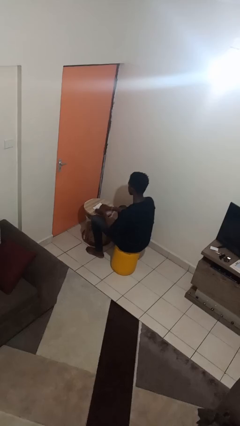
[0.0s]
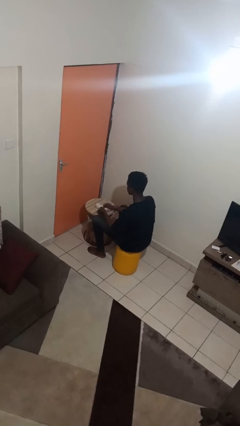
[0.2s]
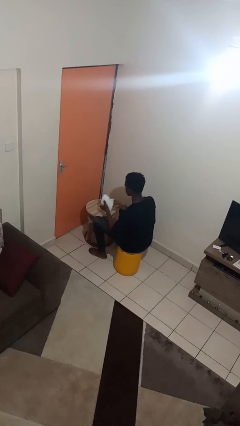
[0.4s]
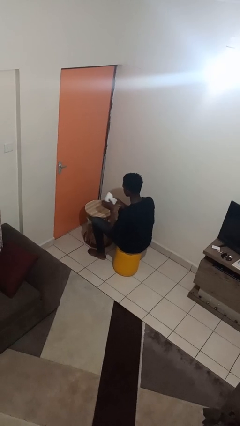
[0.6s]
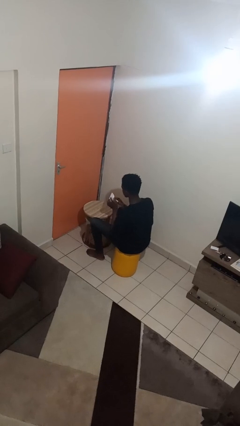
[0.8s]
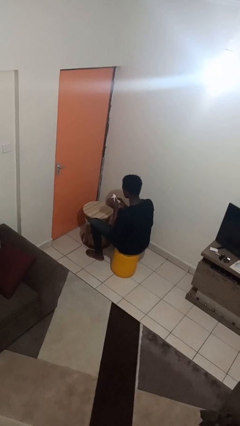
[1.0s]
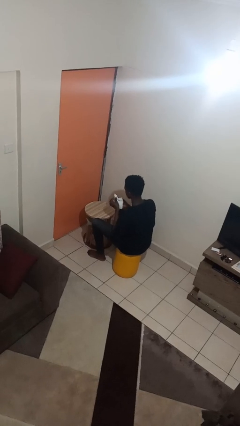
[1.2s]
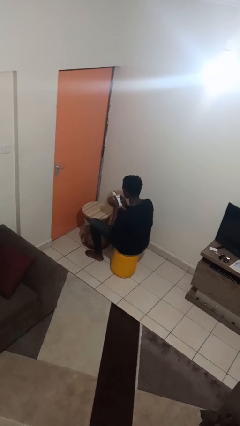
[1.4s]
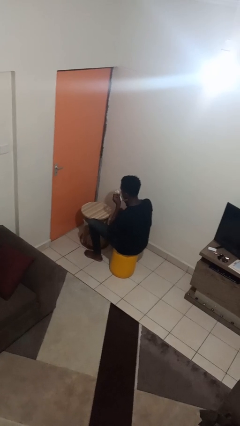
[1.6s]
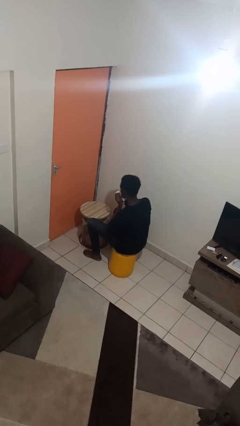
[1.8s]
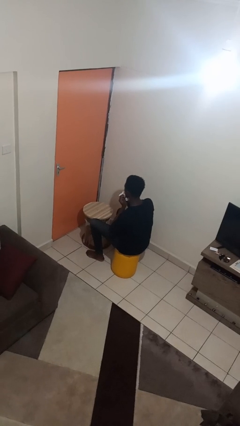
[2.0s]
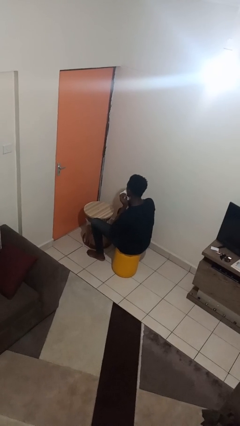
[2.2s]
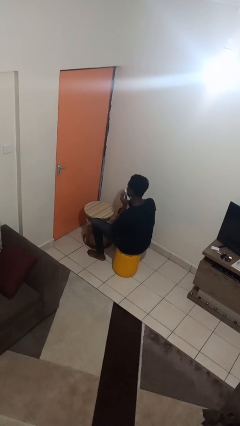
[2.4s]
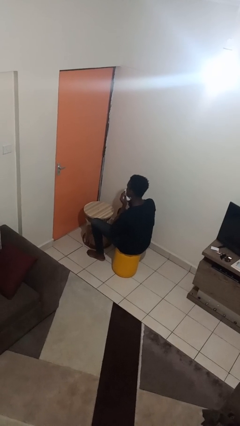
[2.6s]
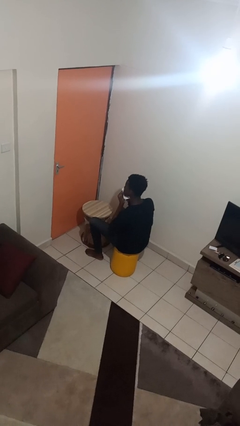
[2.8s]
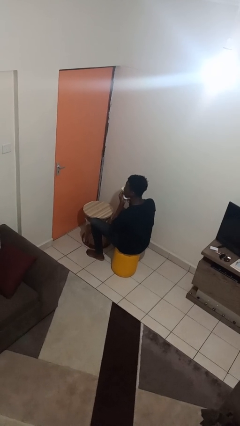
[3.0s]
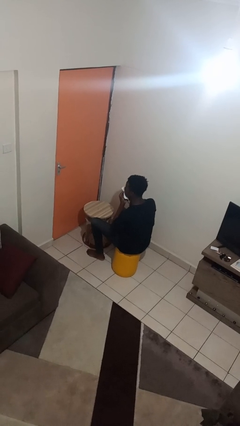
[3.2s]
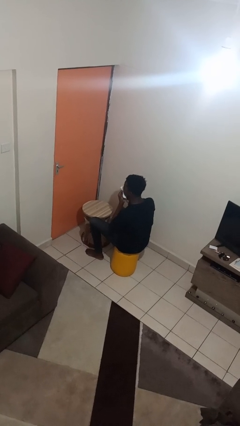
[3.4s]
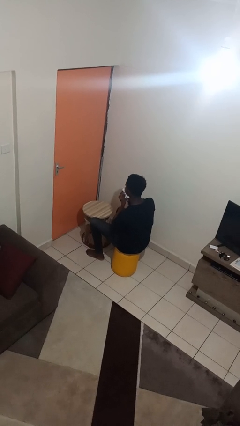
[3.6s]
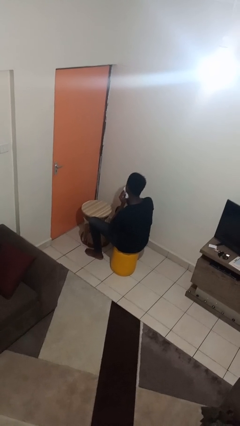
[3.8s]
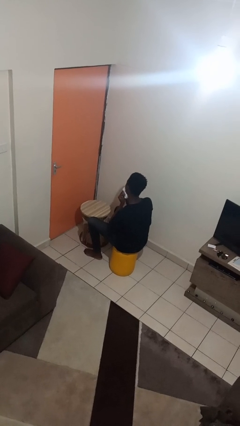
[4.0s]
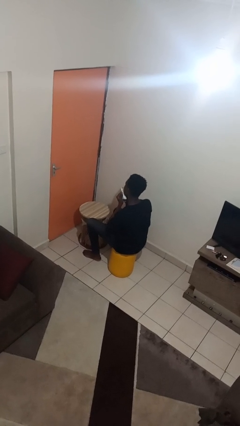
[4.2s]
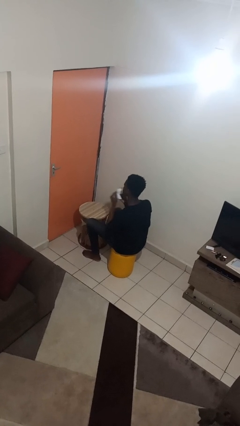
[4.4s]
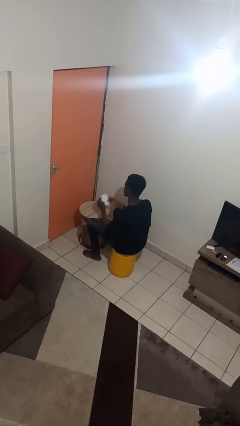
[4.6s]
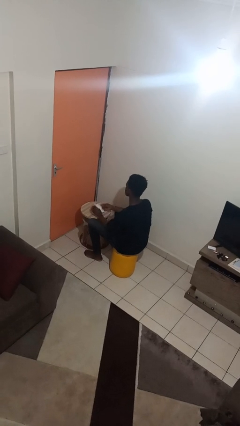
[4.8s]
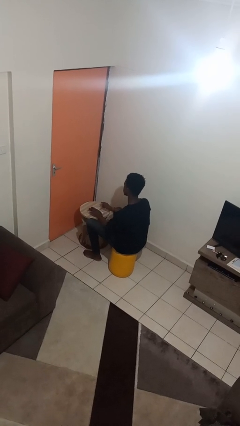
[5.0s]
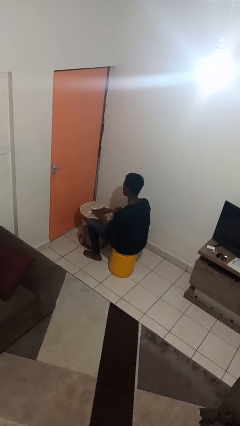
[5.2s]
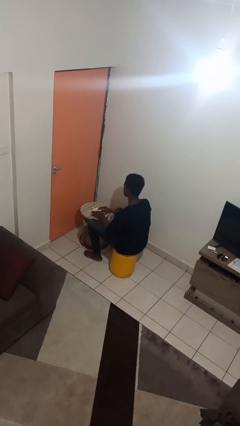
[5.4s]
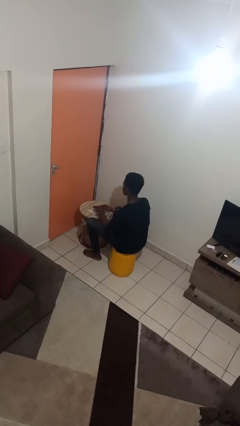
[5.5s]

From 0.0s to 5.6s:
person wipes mouth with napkin

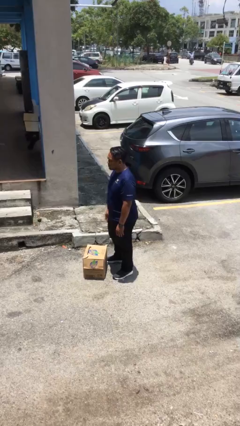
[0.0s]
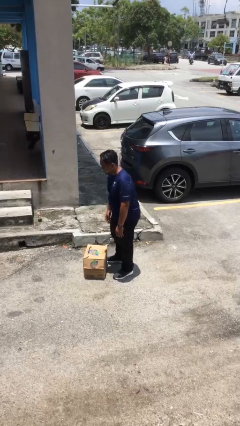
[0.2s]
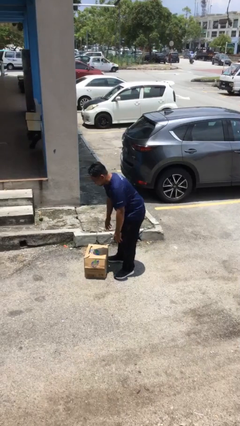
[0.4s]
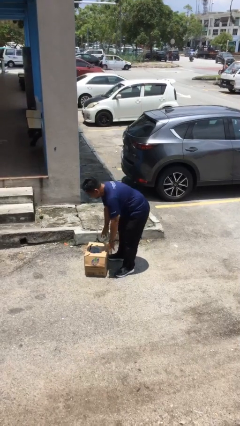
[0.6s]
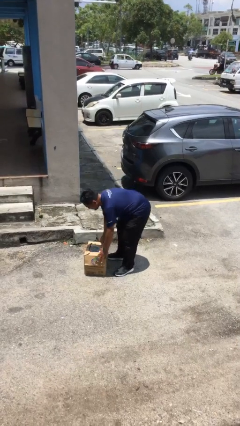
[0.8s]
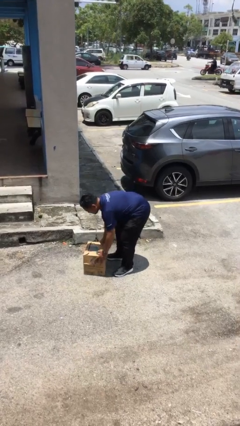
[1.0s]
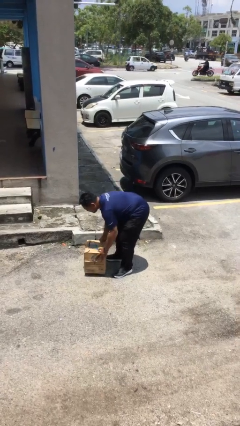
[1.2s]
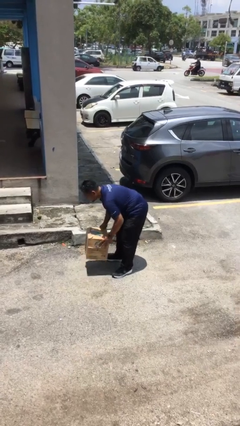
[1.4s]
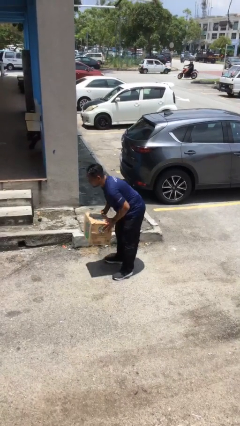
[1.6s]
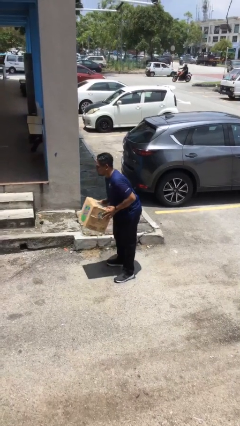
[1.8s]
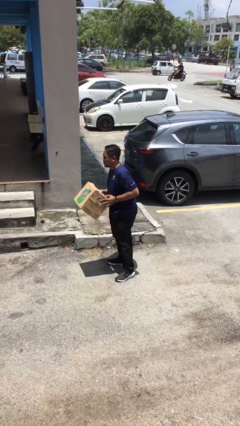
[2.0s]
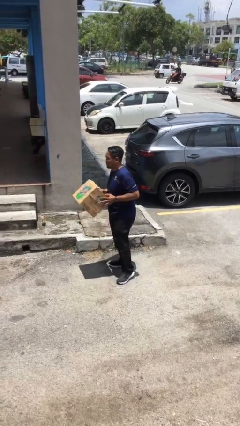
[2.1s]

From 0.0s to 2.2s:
person picks up object from floor

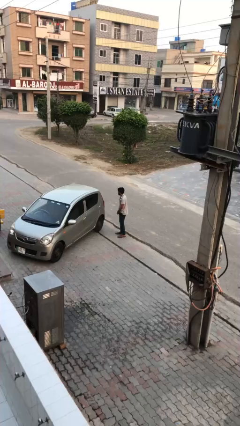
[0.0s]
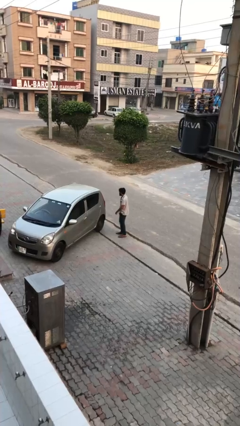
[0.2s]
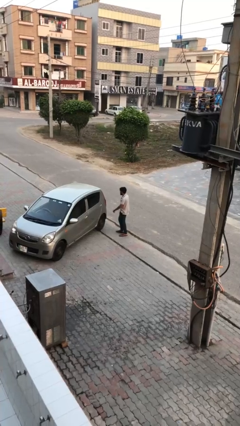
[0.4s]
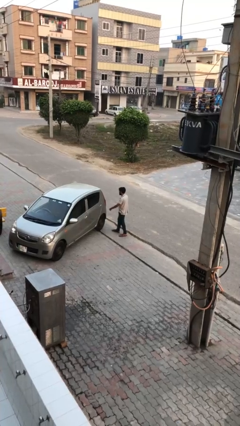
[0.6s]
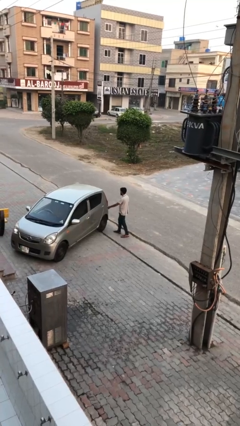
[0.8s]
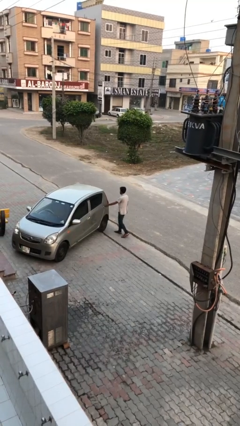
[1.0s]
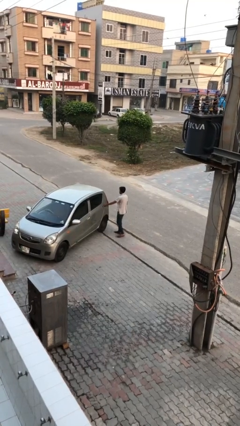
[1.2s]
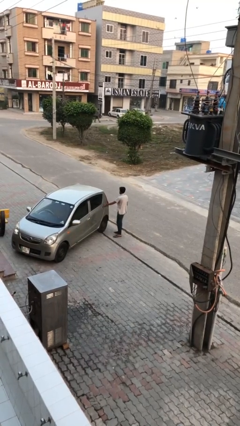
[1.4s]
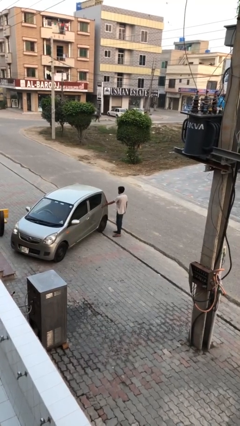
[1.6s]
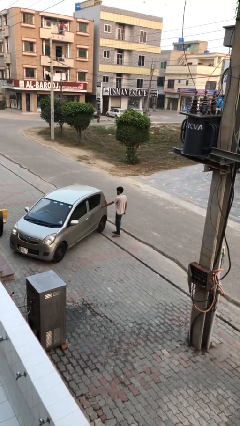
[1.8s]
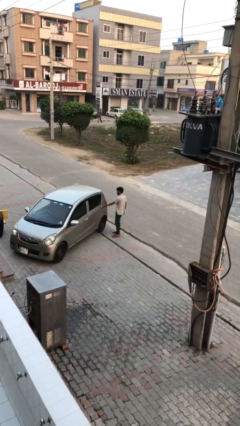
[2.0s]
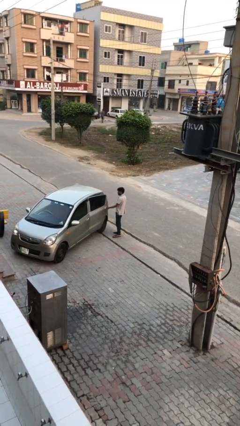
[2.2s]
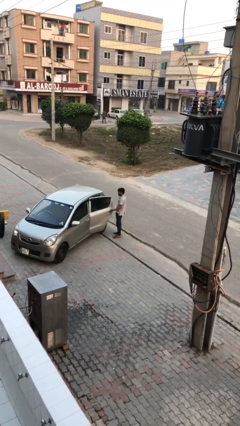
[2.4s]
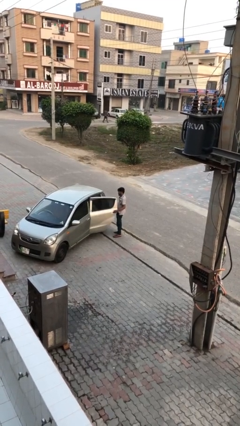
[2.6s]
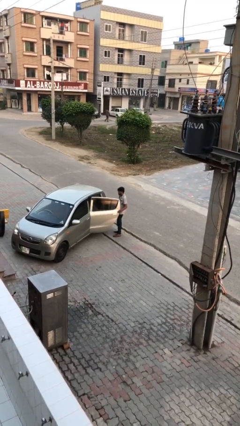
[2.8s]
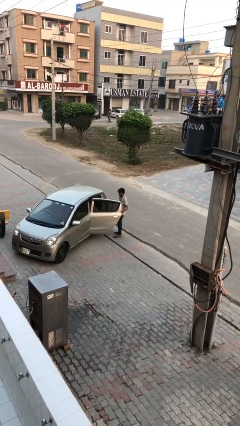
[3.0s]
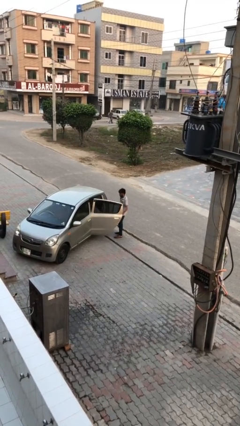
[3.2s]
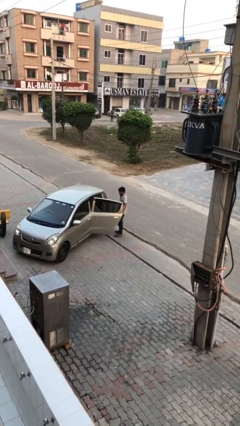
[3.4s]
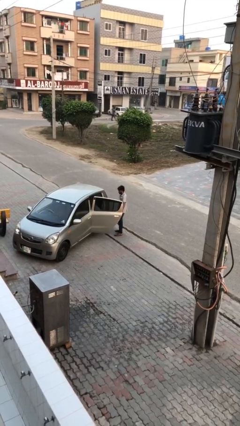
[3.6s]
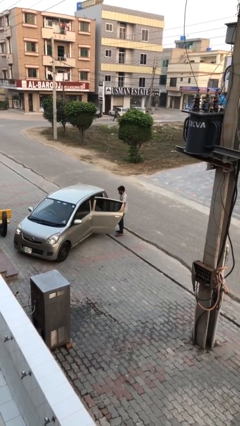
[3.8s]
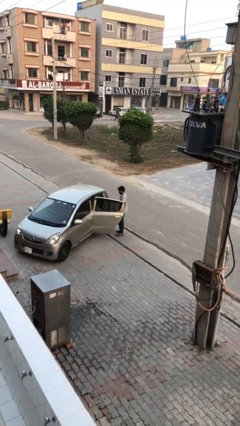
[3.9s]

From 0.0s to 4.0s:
person opens car door

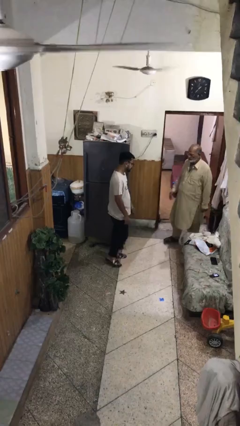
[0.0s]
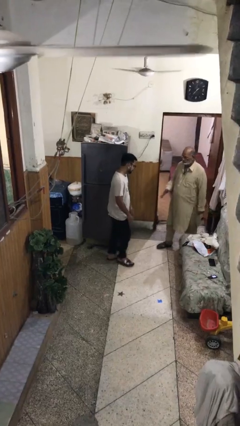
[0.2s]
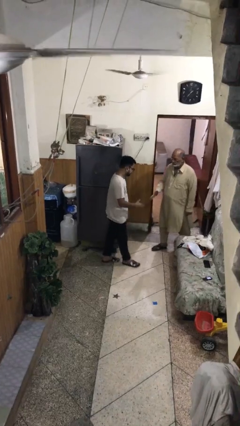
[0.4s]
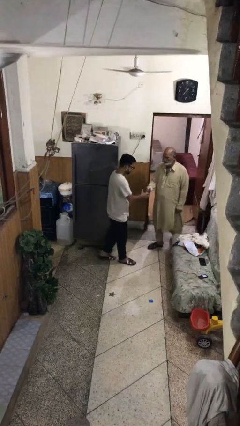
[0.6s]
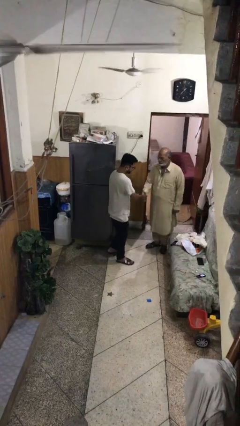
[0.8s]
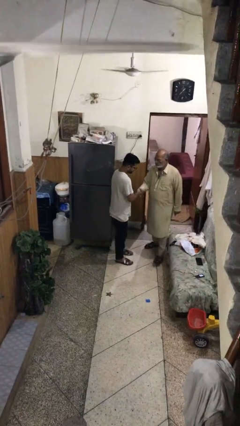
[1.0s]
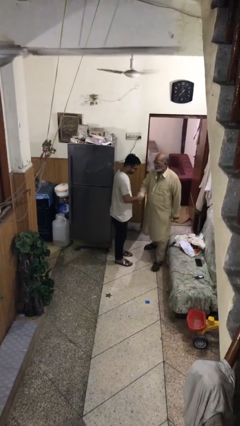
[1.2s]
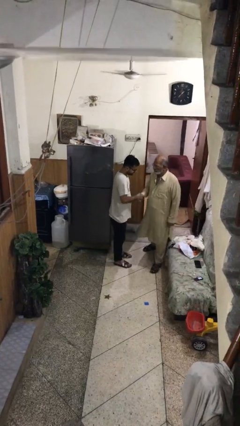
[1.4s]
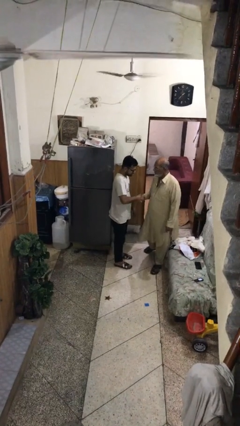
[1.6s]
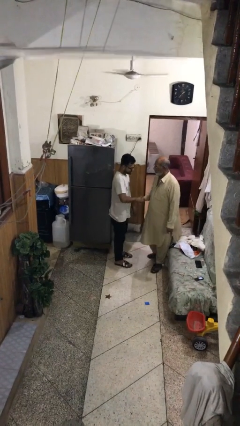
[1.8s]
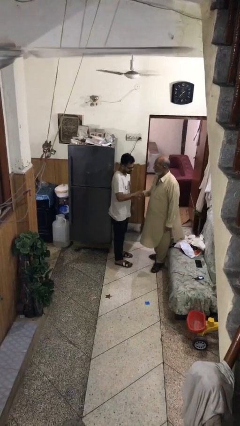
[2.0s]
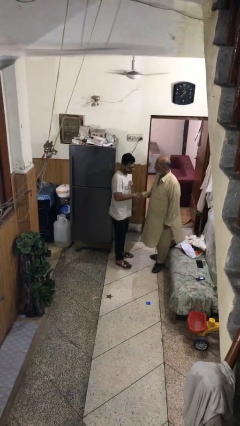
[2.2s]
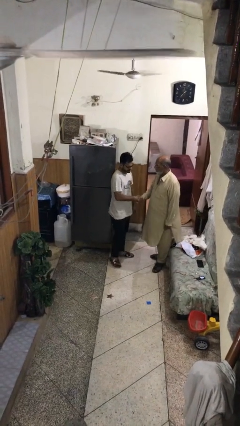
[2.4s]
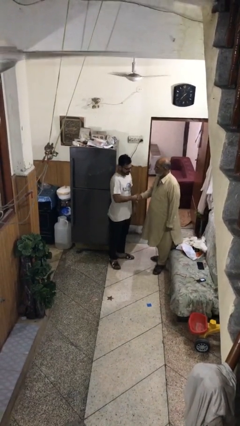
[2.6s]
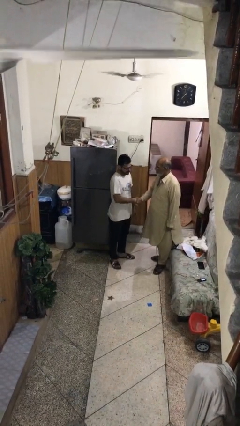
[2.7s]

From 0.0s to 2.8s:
person shakes hand

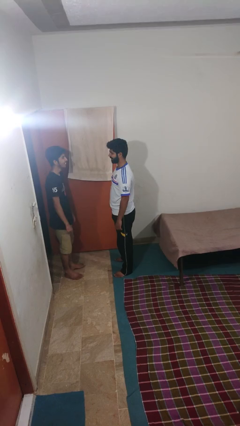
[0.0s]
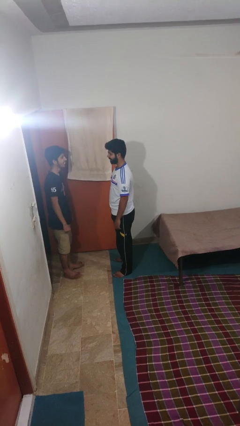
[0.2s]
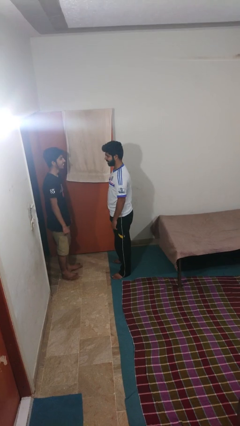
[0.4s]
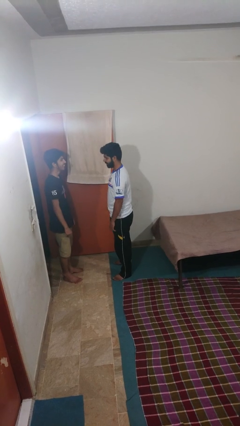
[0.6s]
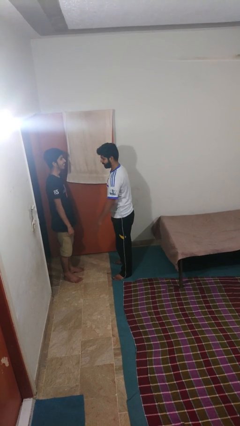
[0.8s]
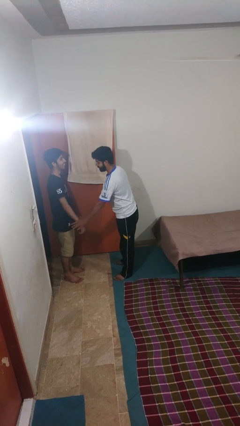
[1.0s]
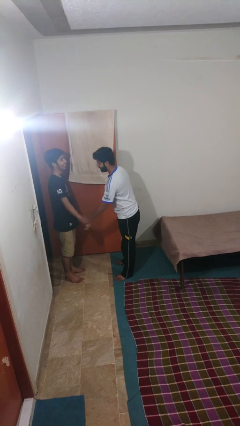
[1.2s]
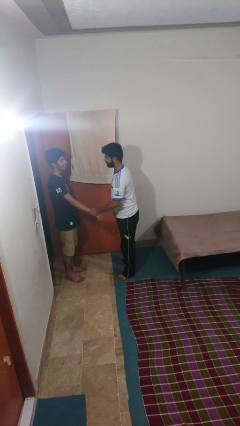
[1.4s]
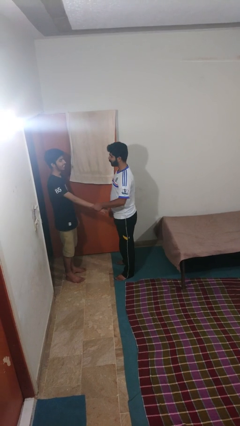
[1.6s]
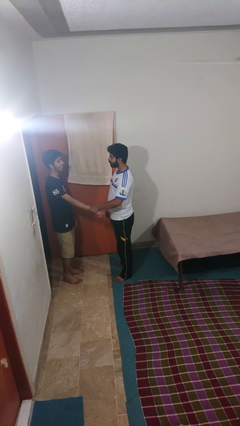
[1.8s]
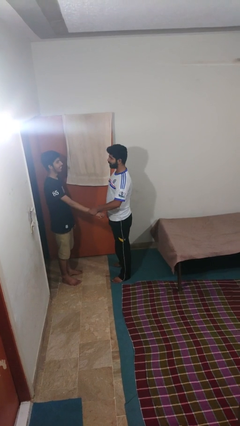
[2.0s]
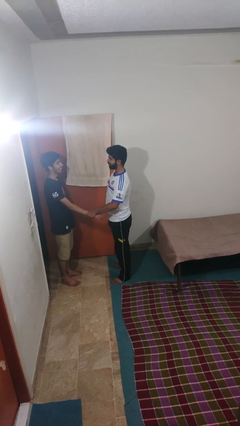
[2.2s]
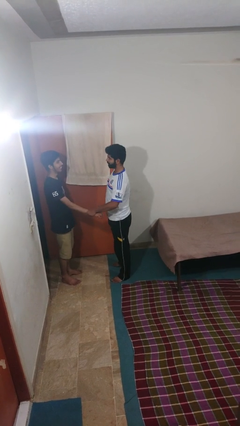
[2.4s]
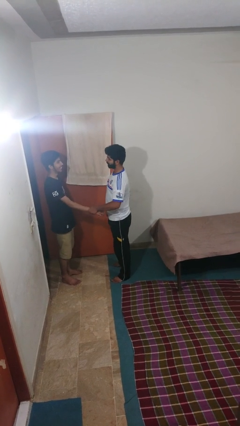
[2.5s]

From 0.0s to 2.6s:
person grabs person by forearm

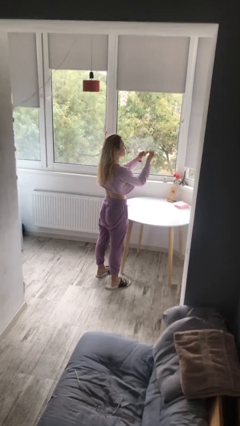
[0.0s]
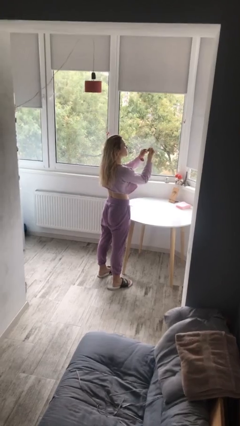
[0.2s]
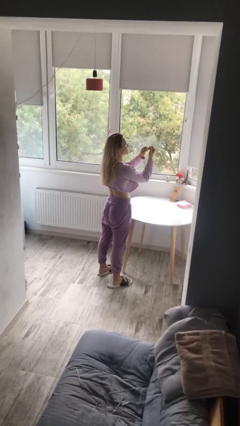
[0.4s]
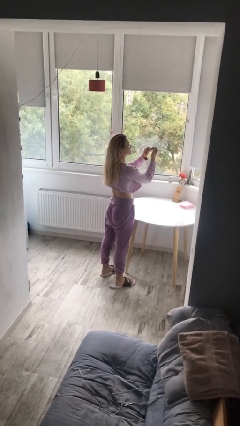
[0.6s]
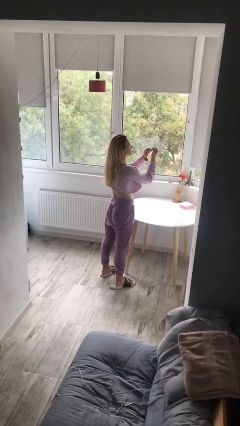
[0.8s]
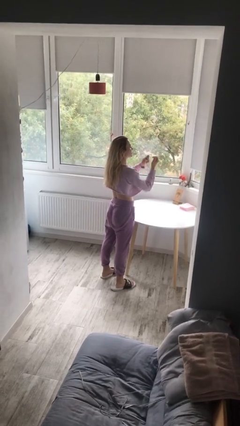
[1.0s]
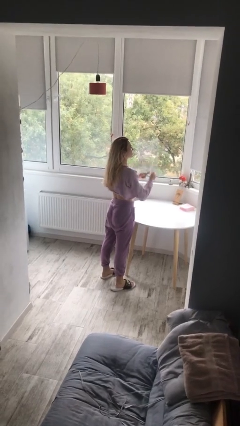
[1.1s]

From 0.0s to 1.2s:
person files fingernails
